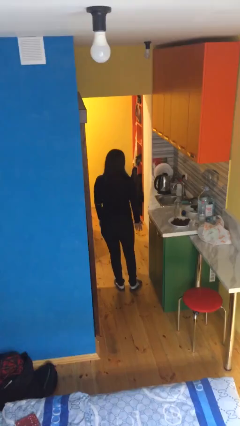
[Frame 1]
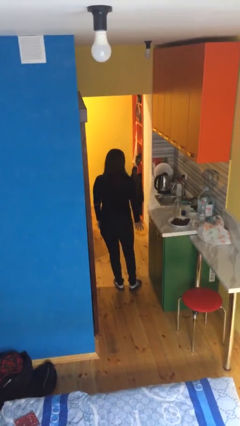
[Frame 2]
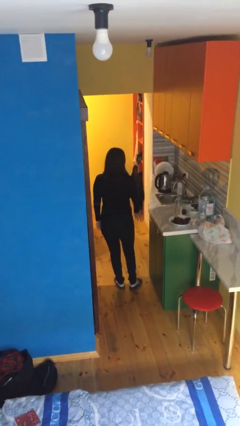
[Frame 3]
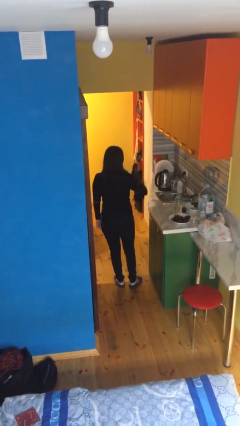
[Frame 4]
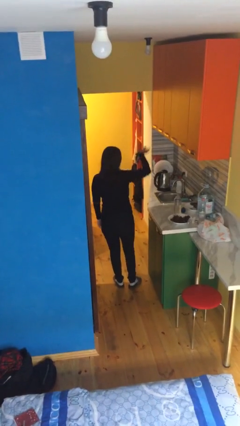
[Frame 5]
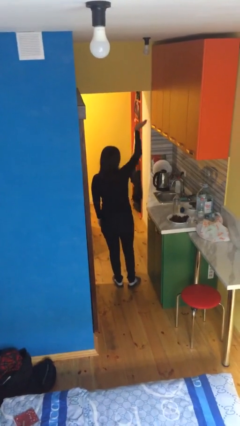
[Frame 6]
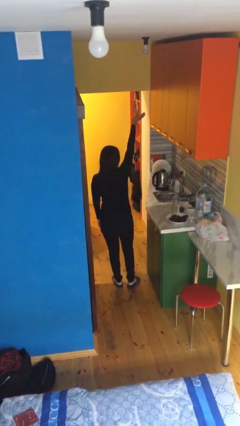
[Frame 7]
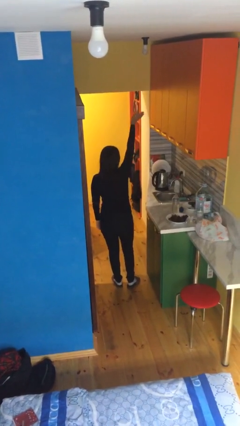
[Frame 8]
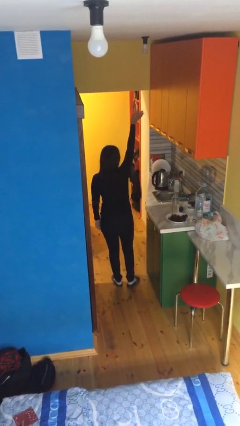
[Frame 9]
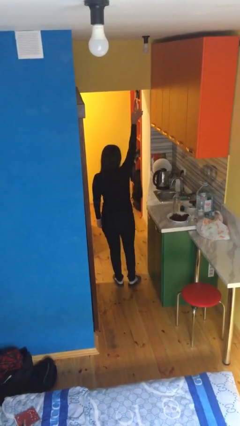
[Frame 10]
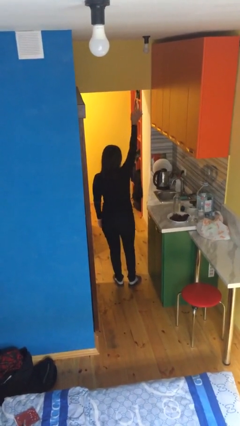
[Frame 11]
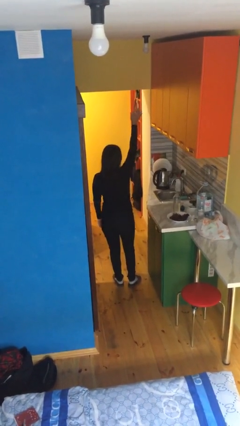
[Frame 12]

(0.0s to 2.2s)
person gestures swipe up

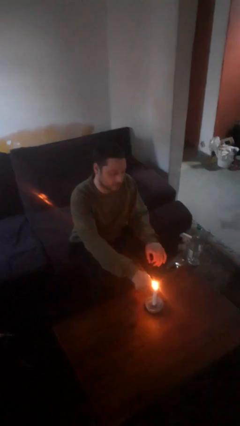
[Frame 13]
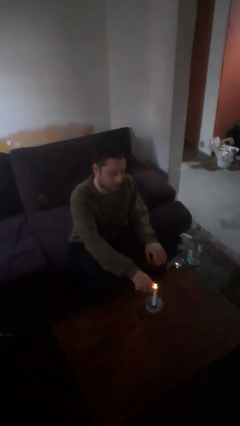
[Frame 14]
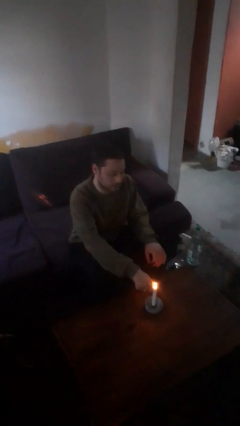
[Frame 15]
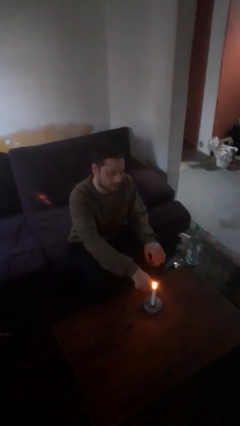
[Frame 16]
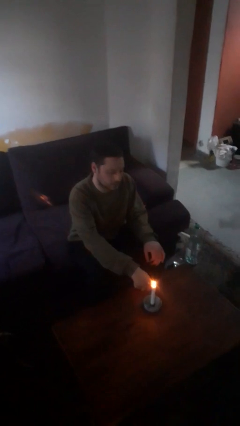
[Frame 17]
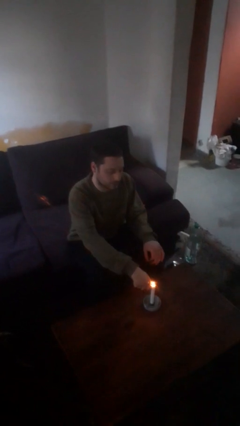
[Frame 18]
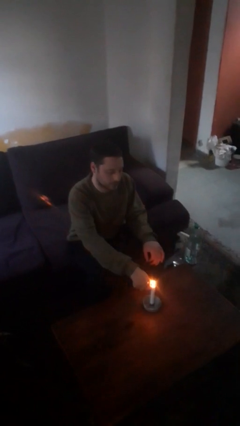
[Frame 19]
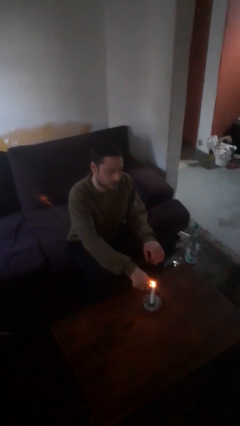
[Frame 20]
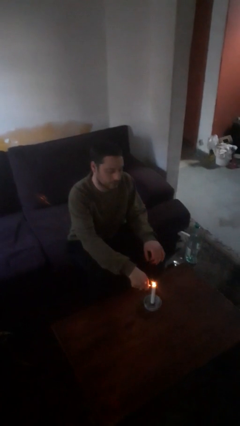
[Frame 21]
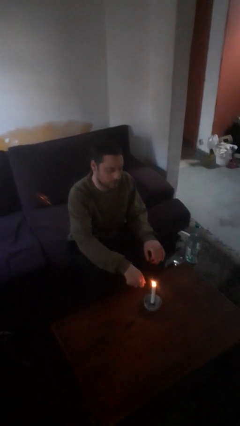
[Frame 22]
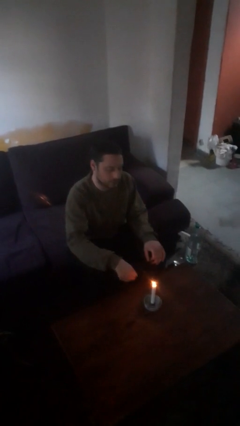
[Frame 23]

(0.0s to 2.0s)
person lights candle

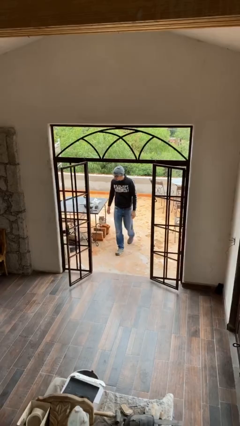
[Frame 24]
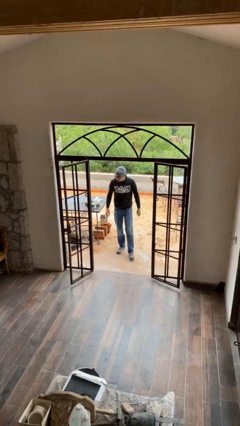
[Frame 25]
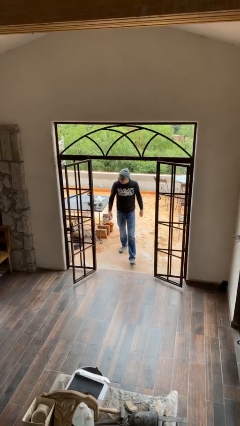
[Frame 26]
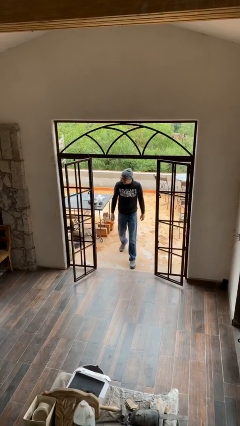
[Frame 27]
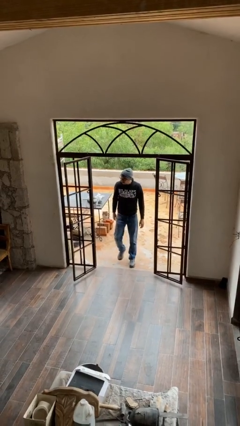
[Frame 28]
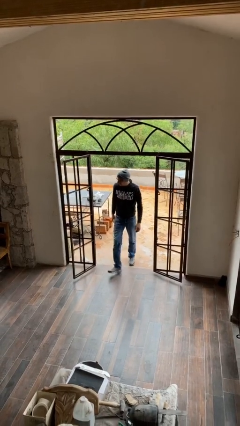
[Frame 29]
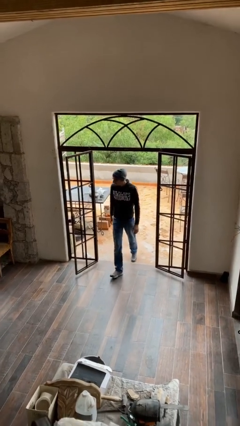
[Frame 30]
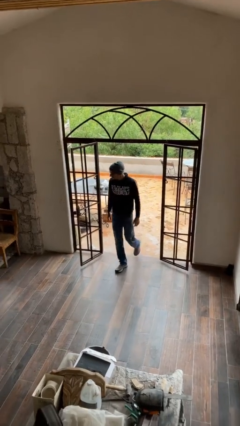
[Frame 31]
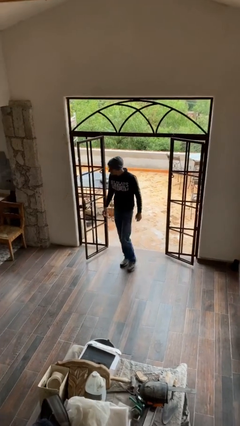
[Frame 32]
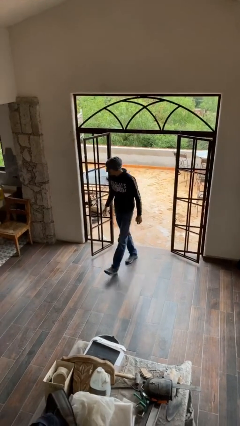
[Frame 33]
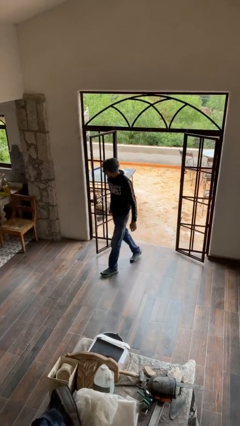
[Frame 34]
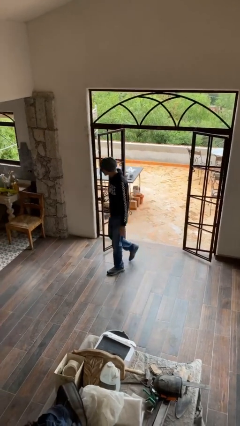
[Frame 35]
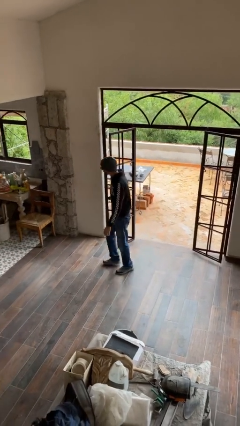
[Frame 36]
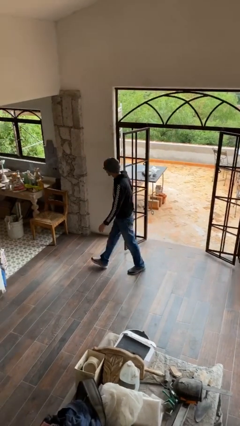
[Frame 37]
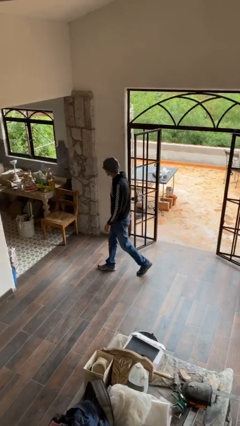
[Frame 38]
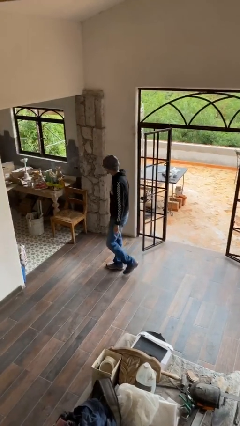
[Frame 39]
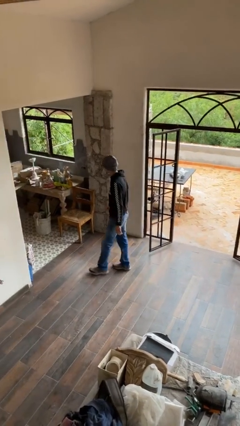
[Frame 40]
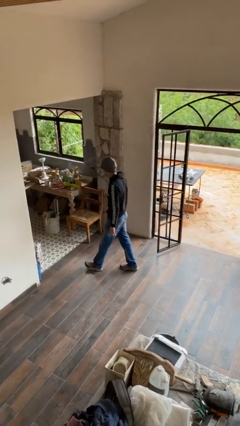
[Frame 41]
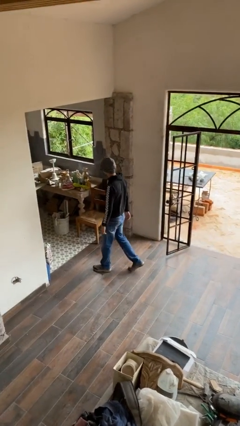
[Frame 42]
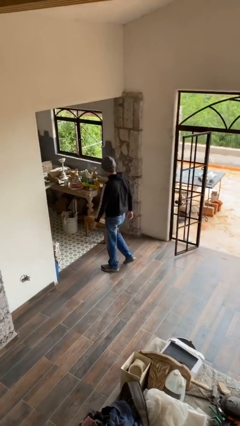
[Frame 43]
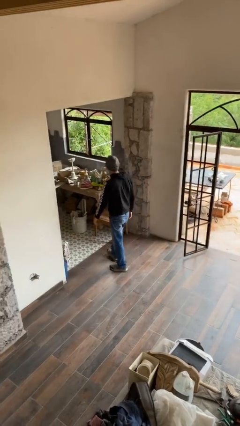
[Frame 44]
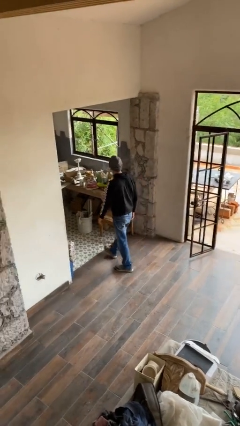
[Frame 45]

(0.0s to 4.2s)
person enters scene through structure

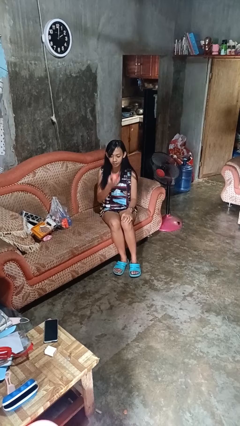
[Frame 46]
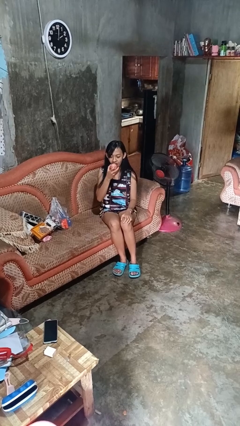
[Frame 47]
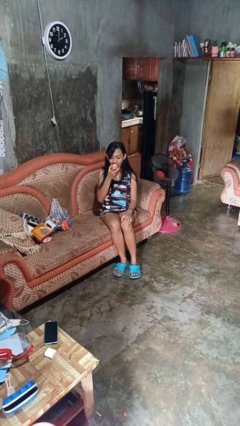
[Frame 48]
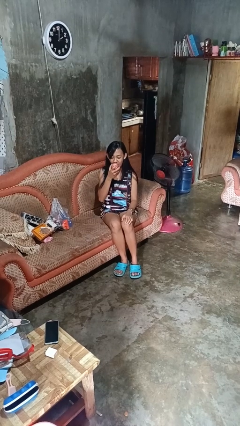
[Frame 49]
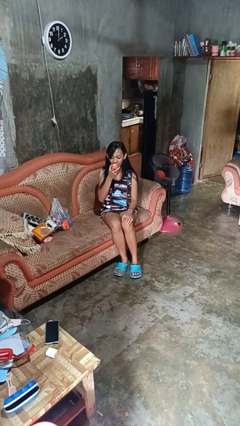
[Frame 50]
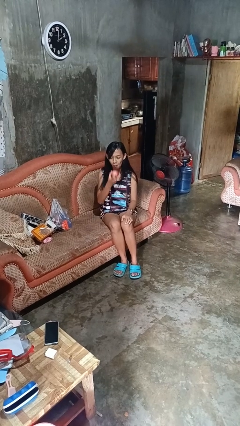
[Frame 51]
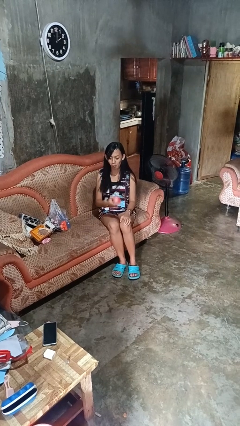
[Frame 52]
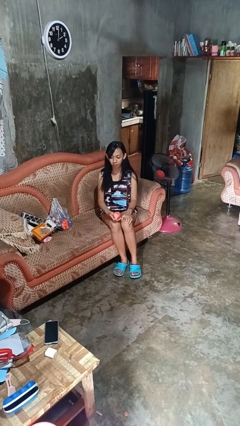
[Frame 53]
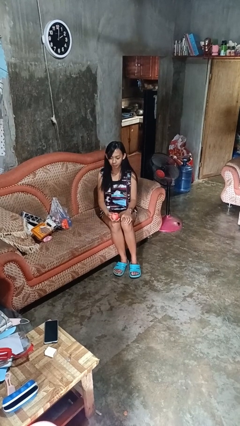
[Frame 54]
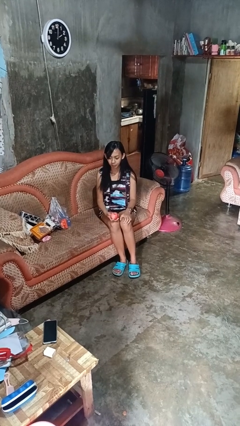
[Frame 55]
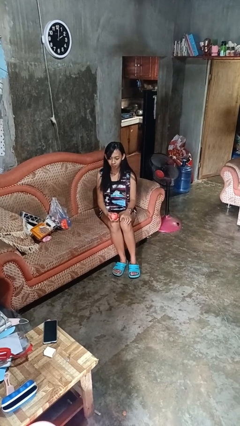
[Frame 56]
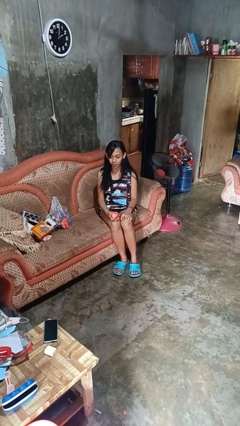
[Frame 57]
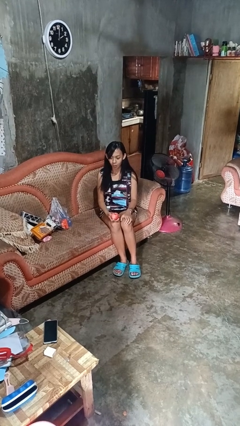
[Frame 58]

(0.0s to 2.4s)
person eats apple

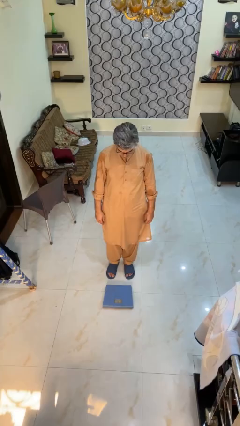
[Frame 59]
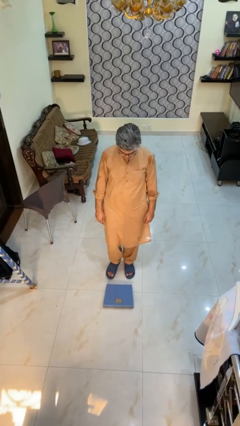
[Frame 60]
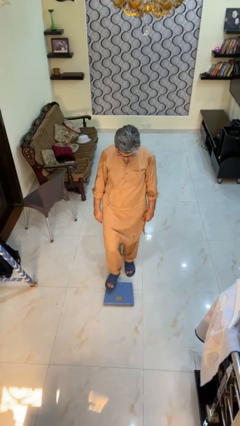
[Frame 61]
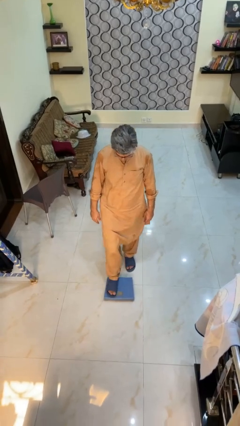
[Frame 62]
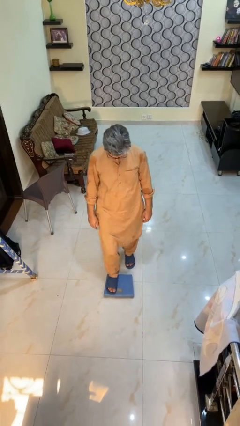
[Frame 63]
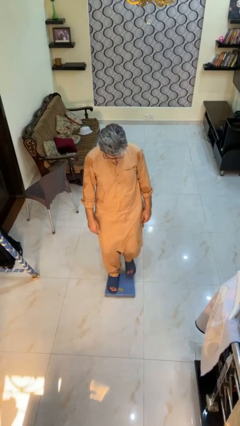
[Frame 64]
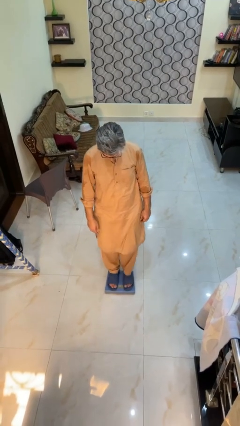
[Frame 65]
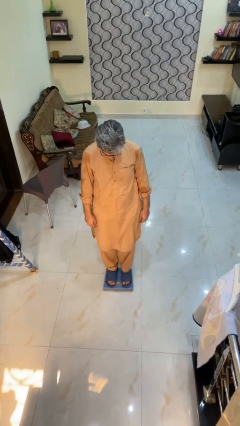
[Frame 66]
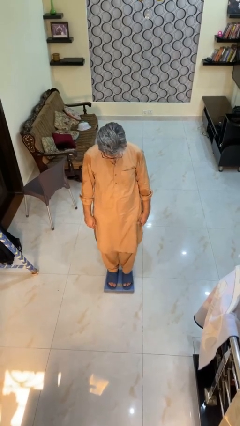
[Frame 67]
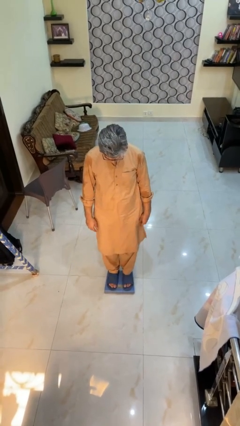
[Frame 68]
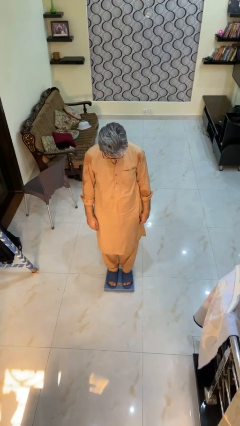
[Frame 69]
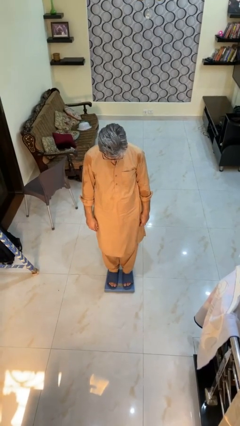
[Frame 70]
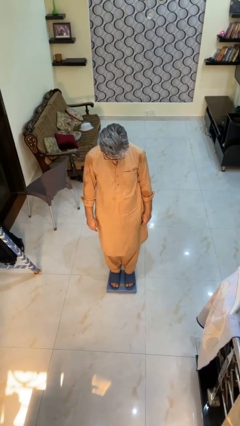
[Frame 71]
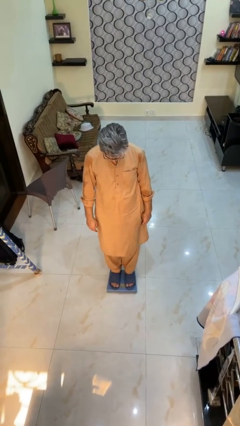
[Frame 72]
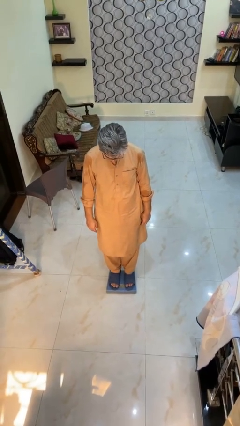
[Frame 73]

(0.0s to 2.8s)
person uses bodyweight scale

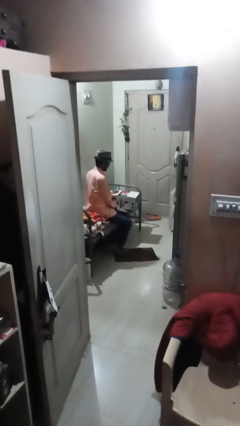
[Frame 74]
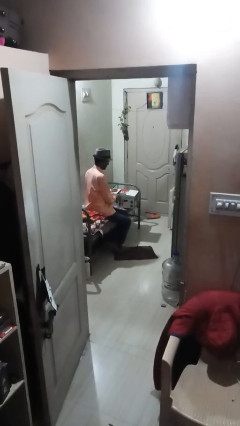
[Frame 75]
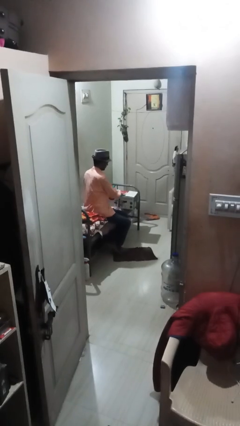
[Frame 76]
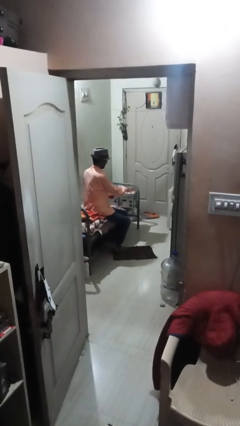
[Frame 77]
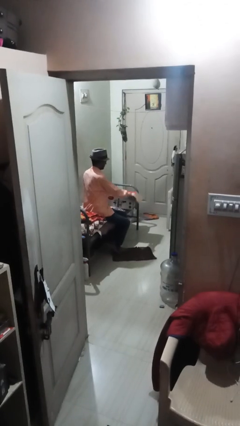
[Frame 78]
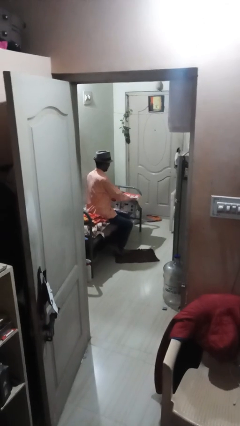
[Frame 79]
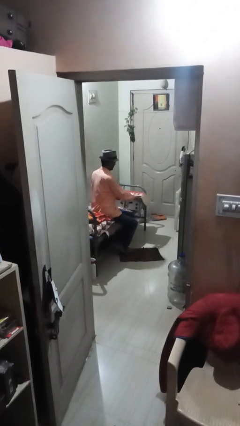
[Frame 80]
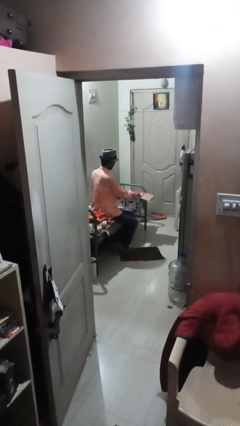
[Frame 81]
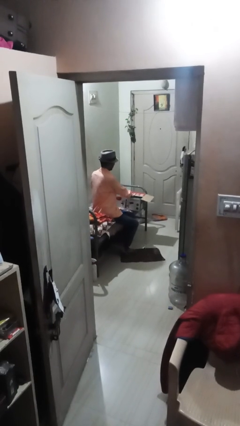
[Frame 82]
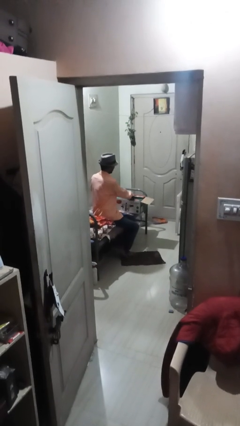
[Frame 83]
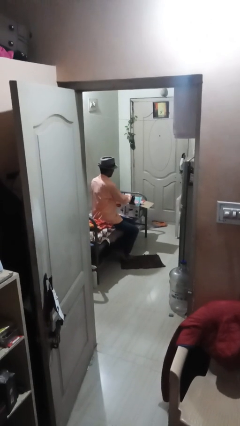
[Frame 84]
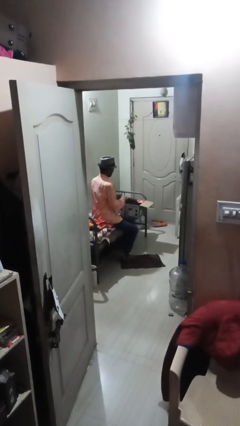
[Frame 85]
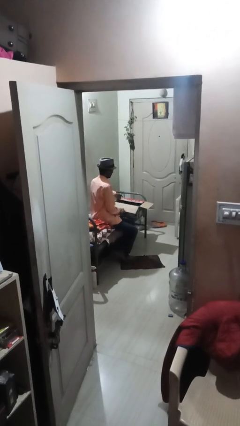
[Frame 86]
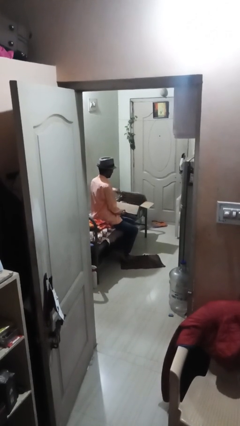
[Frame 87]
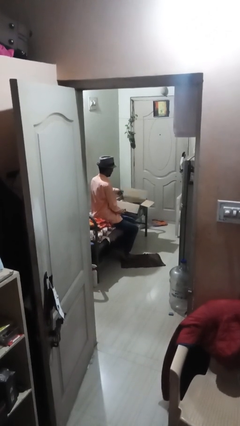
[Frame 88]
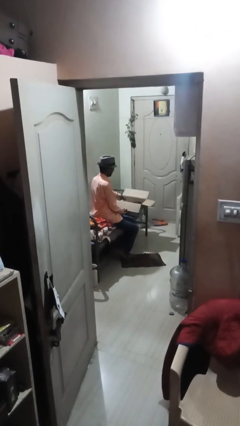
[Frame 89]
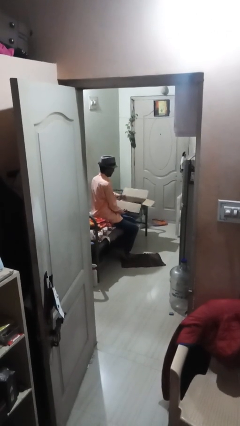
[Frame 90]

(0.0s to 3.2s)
person opens box

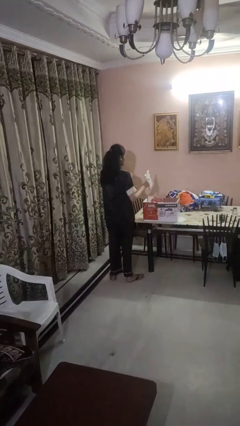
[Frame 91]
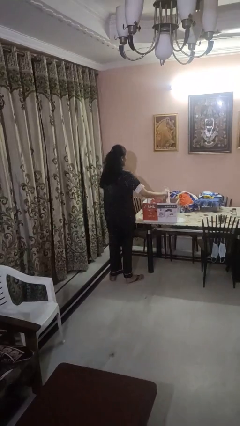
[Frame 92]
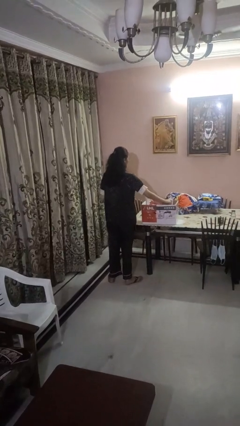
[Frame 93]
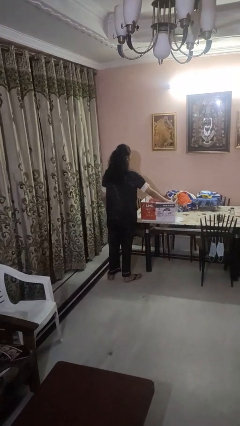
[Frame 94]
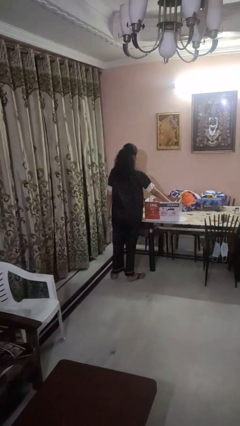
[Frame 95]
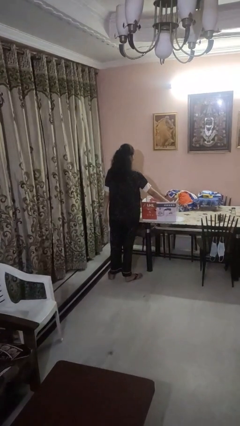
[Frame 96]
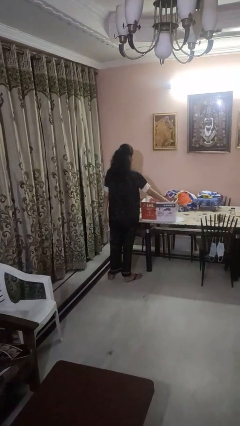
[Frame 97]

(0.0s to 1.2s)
person puts object into box
